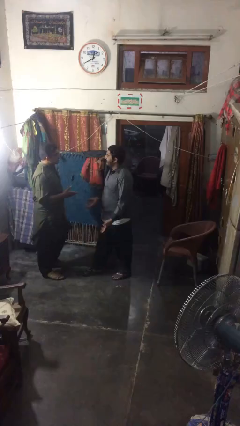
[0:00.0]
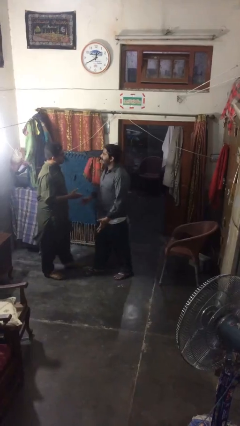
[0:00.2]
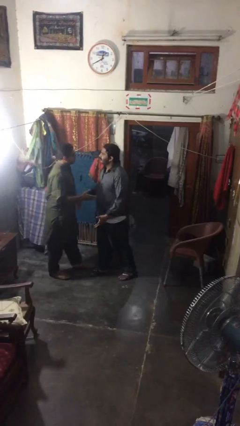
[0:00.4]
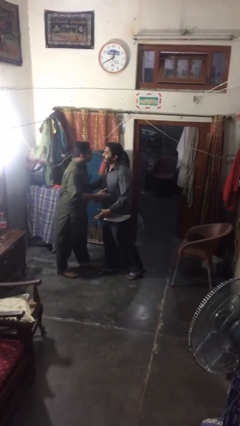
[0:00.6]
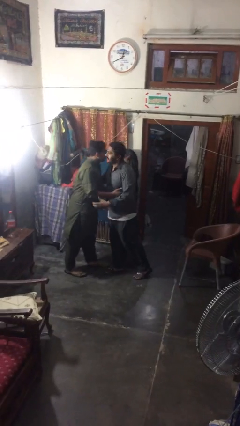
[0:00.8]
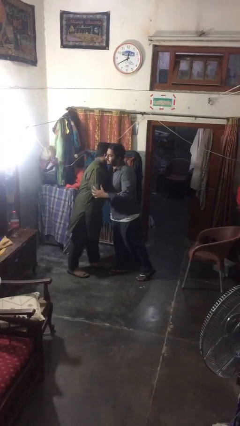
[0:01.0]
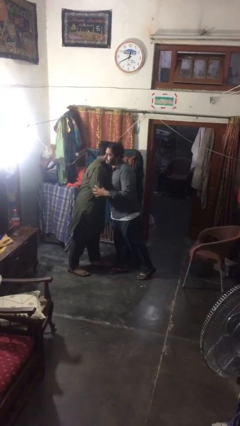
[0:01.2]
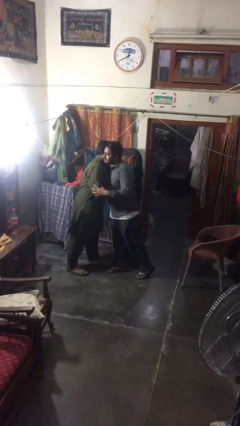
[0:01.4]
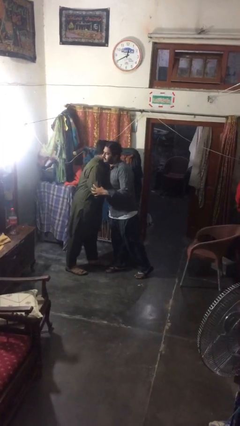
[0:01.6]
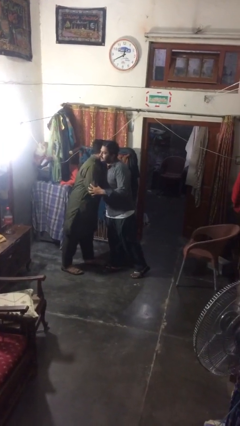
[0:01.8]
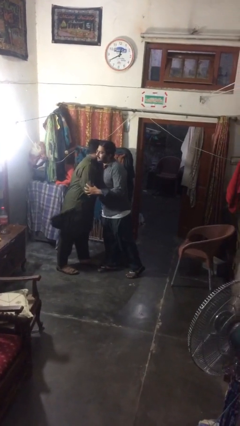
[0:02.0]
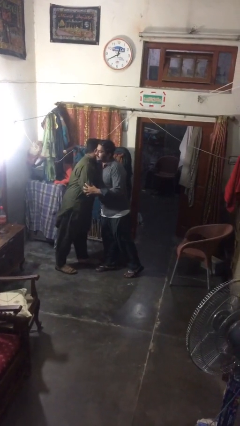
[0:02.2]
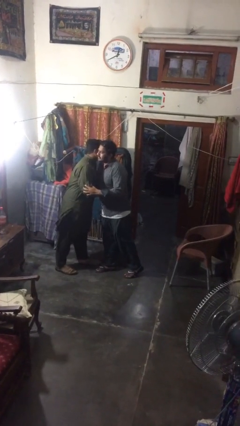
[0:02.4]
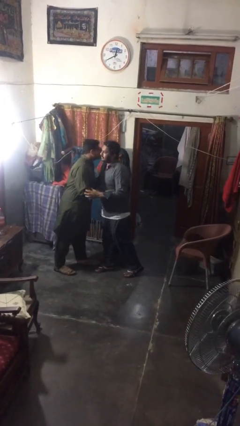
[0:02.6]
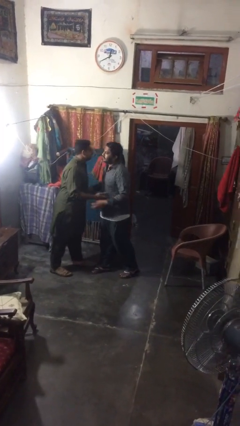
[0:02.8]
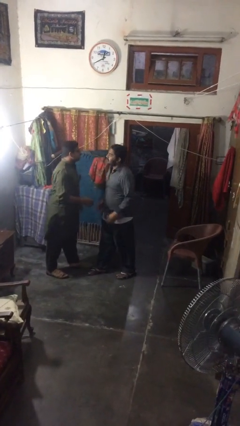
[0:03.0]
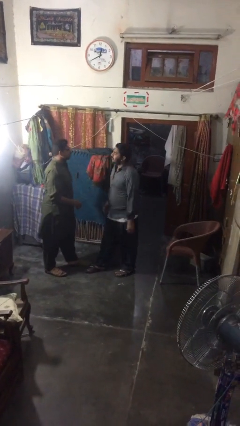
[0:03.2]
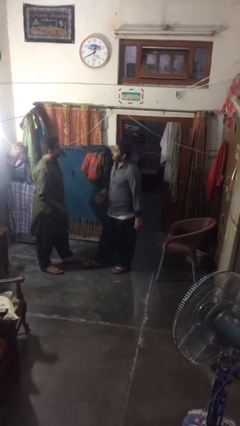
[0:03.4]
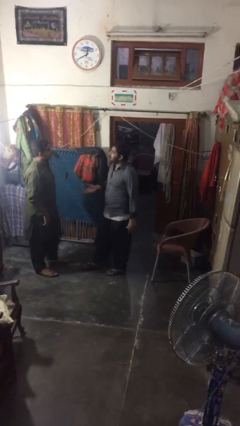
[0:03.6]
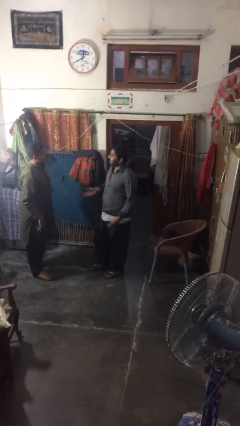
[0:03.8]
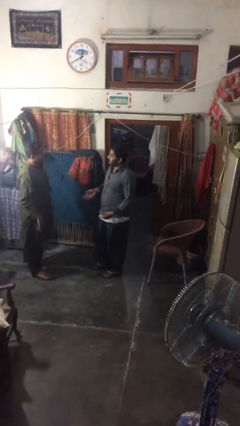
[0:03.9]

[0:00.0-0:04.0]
person embraces person

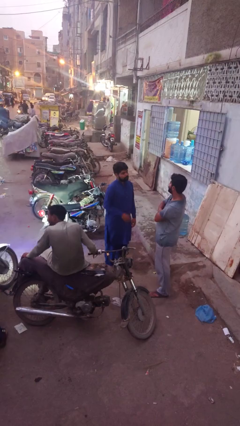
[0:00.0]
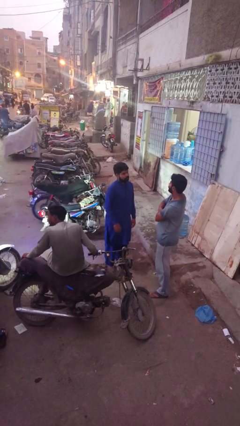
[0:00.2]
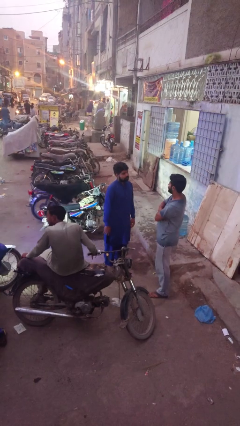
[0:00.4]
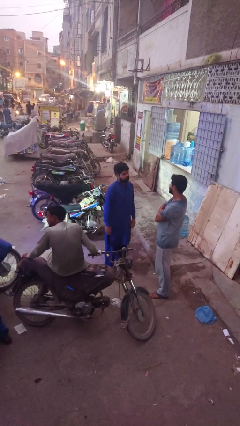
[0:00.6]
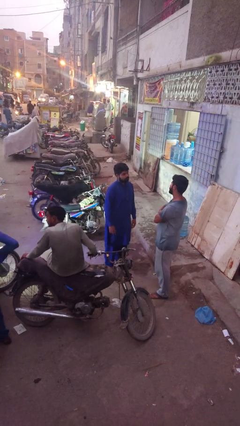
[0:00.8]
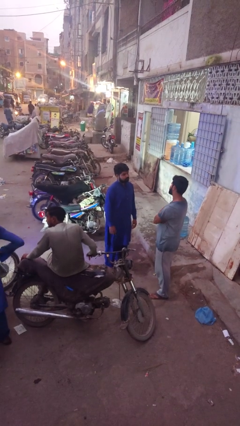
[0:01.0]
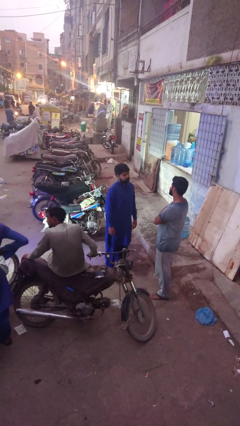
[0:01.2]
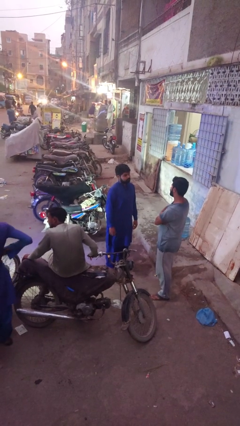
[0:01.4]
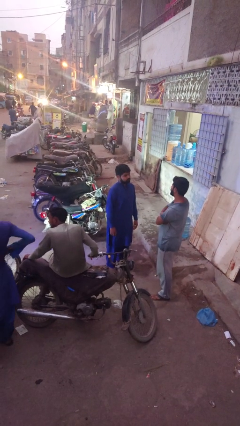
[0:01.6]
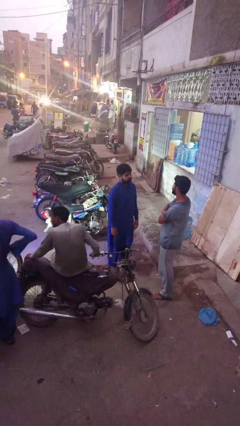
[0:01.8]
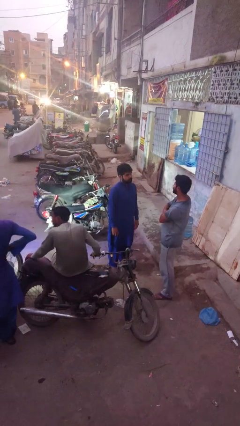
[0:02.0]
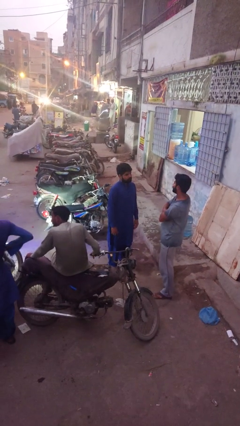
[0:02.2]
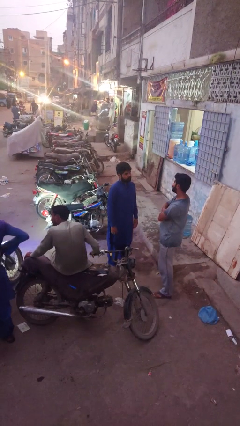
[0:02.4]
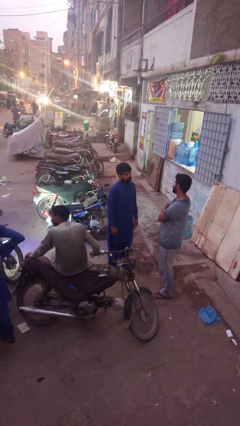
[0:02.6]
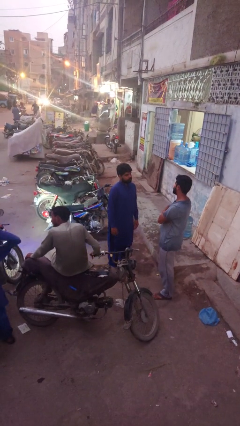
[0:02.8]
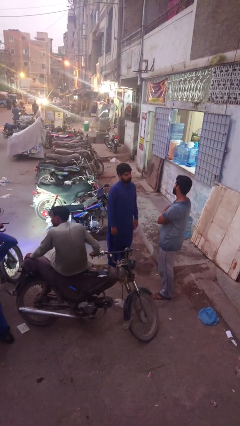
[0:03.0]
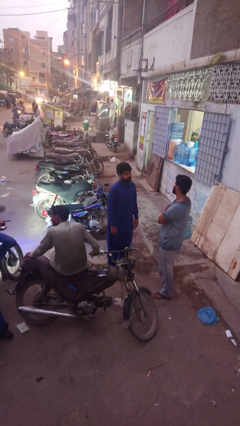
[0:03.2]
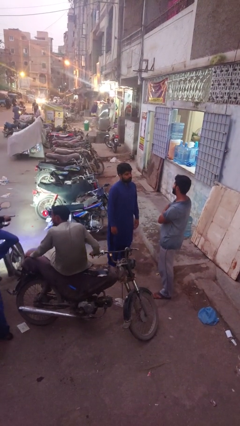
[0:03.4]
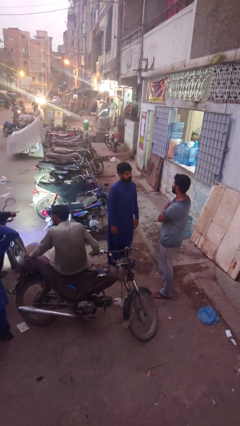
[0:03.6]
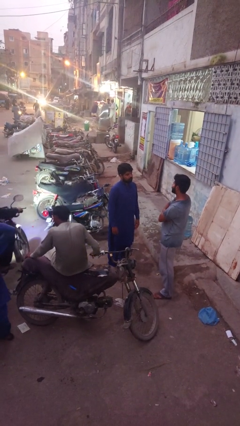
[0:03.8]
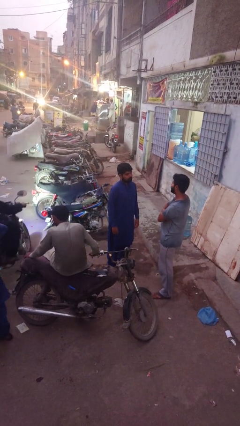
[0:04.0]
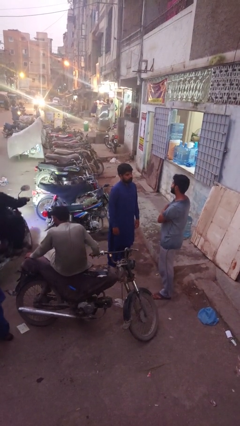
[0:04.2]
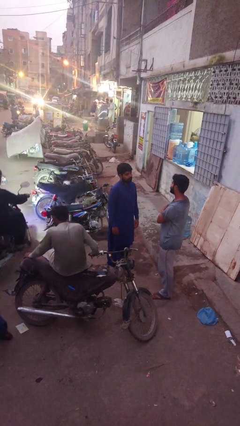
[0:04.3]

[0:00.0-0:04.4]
person talks to person

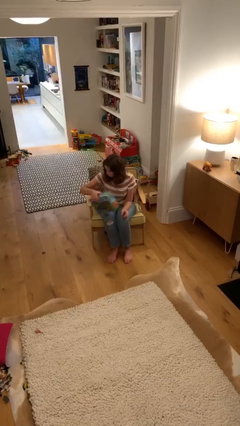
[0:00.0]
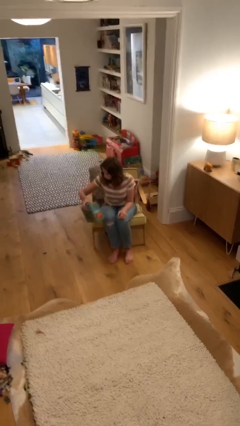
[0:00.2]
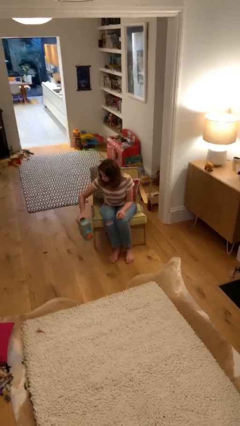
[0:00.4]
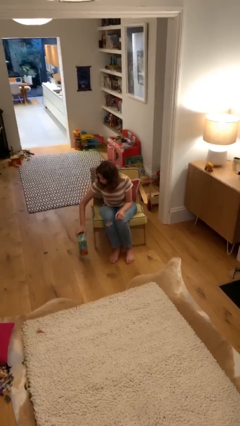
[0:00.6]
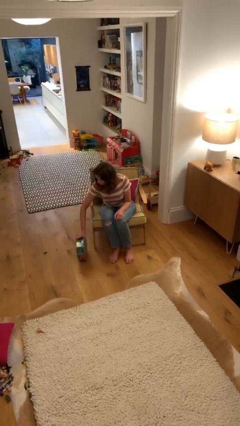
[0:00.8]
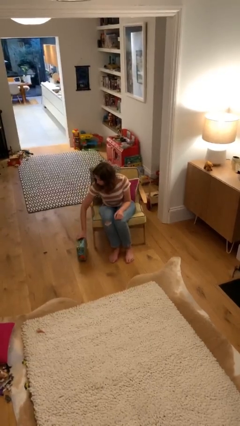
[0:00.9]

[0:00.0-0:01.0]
person puts down object on floor

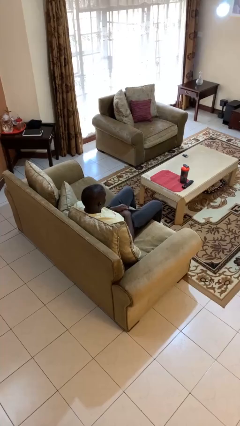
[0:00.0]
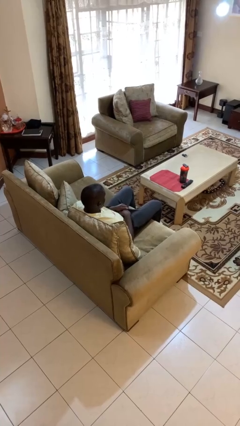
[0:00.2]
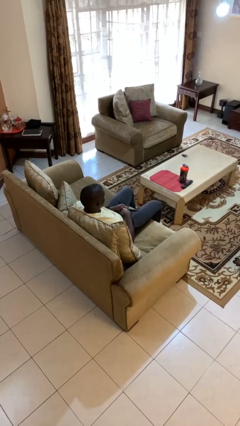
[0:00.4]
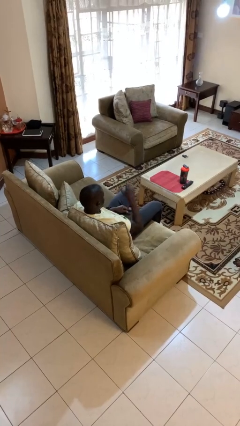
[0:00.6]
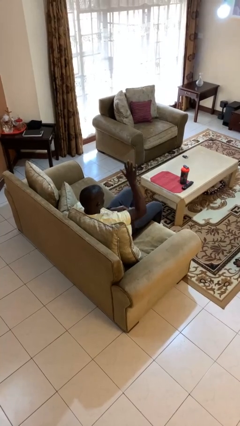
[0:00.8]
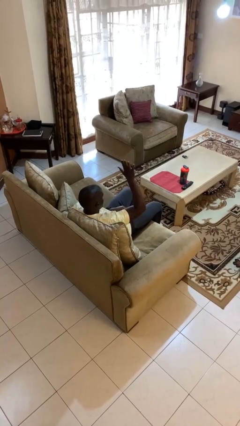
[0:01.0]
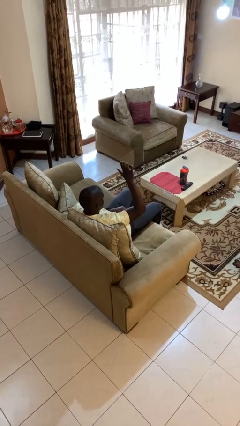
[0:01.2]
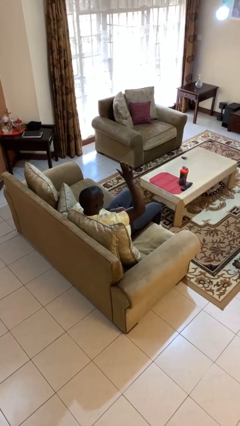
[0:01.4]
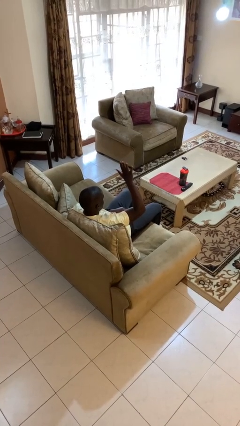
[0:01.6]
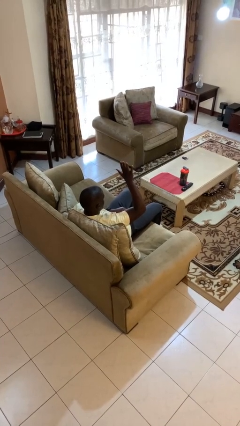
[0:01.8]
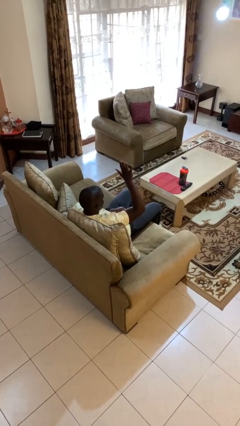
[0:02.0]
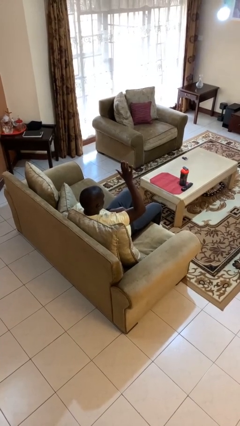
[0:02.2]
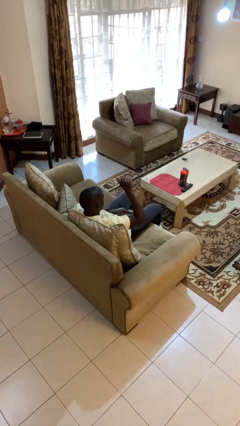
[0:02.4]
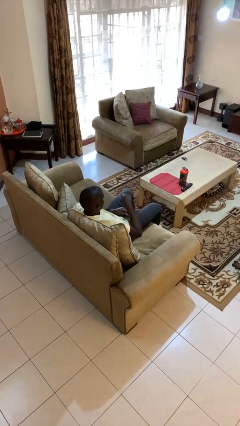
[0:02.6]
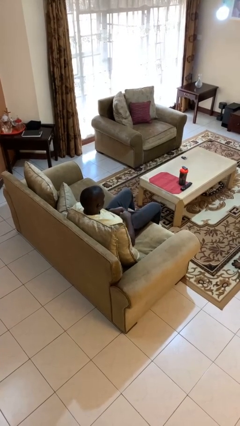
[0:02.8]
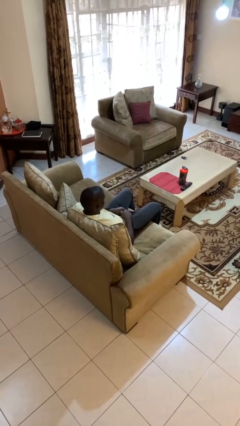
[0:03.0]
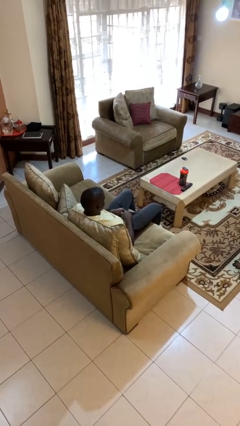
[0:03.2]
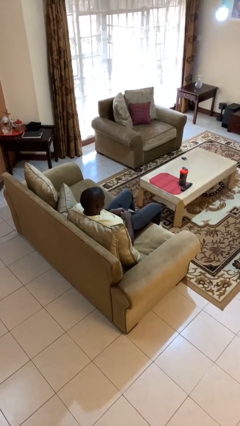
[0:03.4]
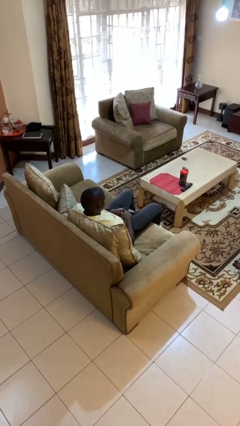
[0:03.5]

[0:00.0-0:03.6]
person gestures number five

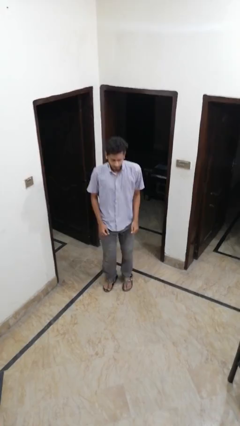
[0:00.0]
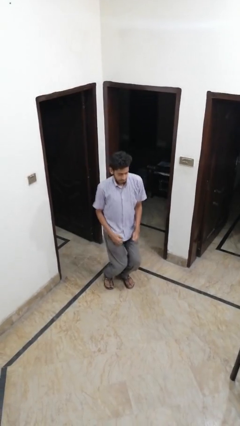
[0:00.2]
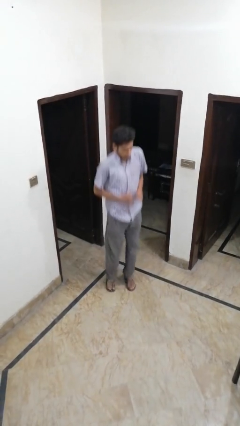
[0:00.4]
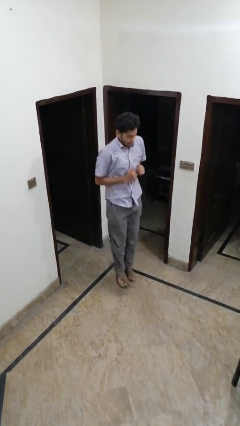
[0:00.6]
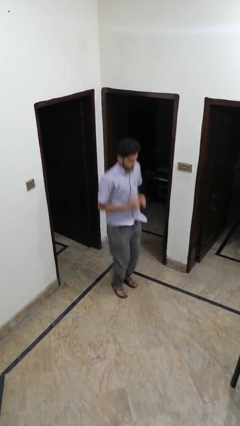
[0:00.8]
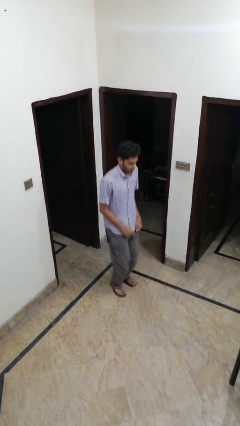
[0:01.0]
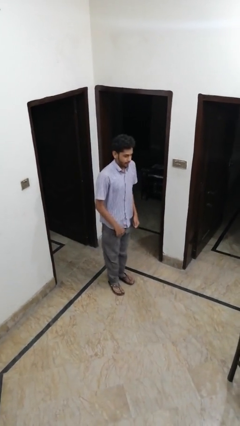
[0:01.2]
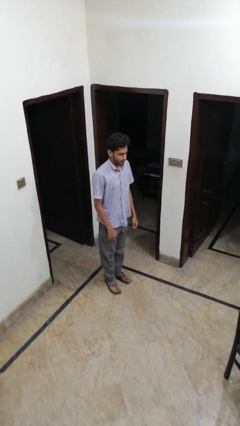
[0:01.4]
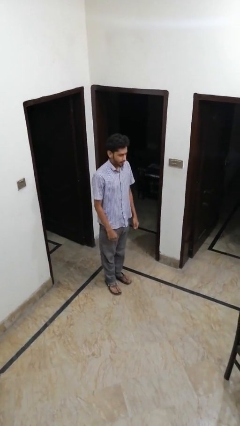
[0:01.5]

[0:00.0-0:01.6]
person jumps

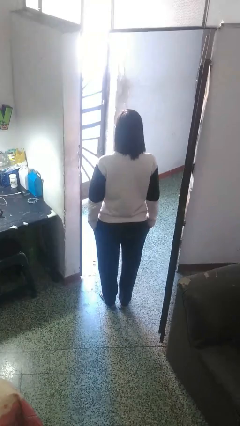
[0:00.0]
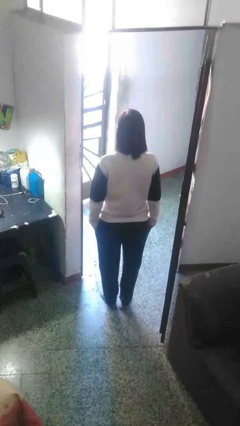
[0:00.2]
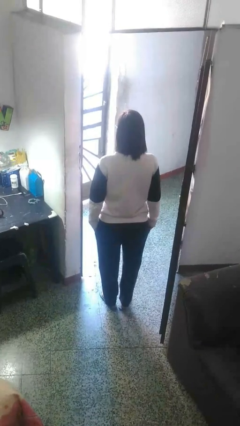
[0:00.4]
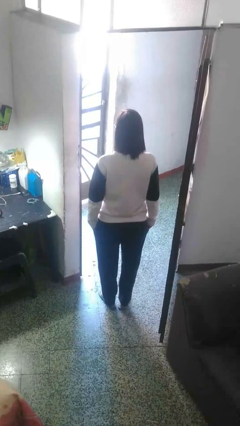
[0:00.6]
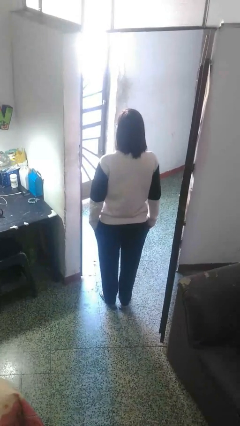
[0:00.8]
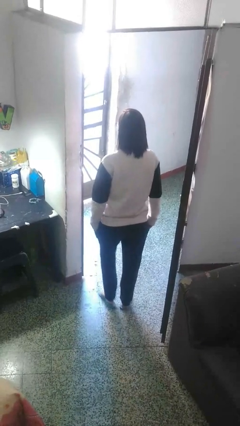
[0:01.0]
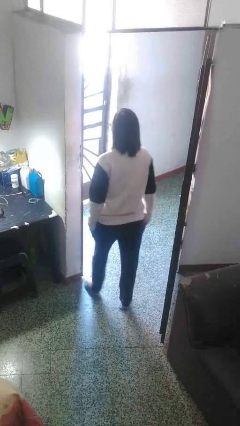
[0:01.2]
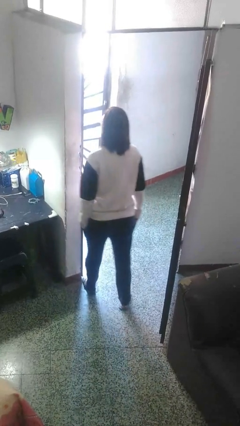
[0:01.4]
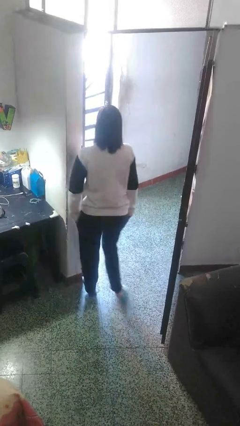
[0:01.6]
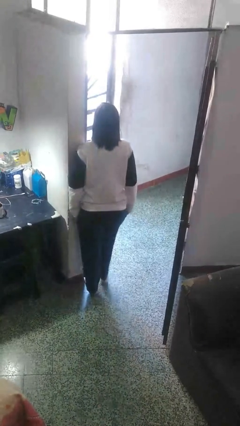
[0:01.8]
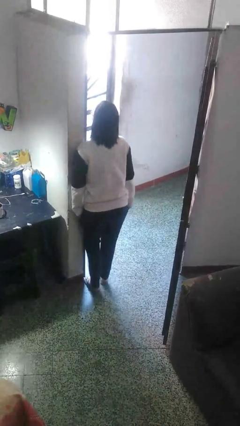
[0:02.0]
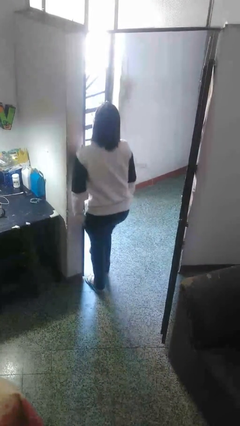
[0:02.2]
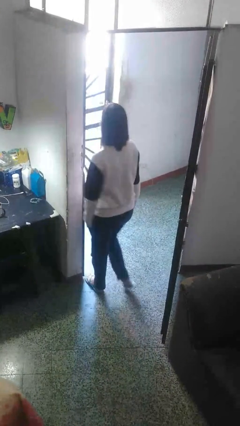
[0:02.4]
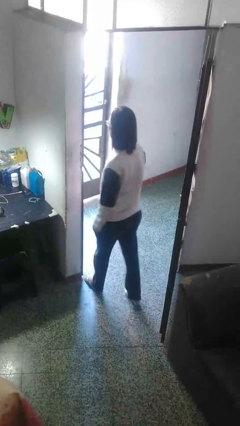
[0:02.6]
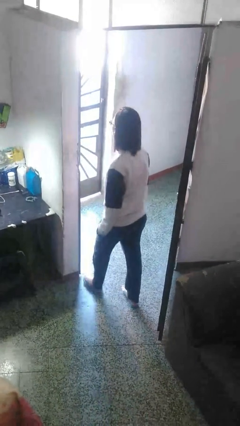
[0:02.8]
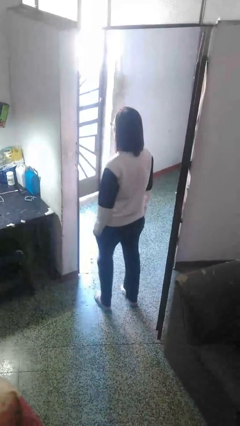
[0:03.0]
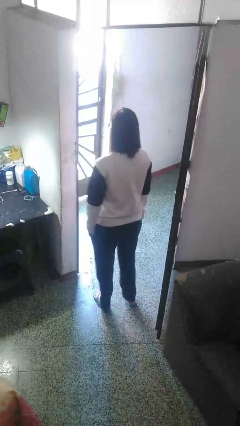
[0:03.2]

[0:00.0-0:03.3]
person bumps into wall
